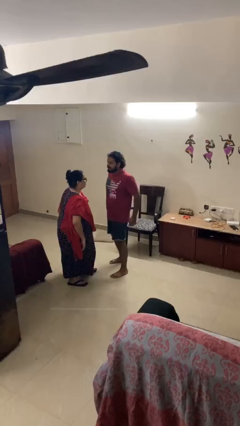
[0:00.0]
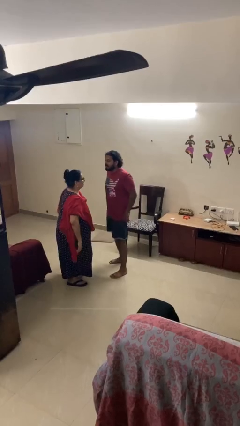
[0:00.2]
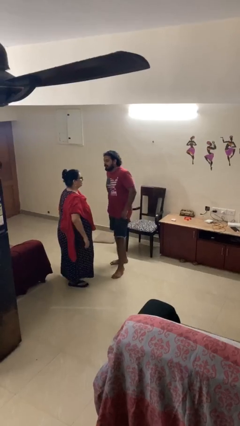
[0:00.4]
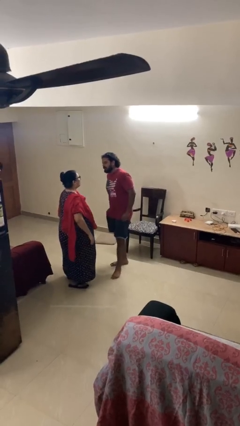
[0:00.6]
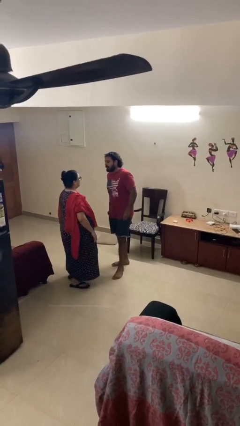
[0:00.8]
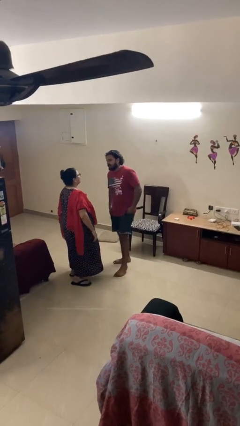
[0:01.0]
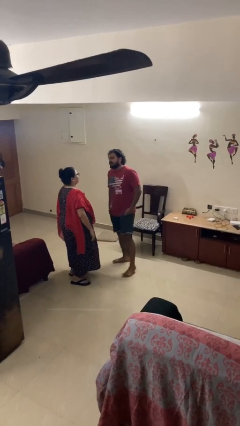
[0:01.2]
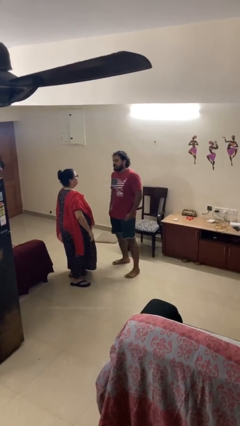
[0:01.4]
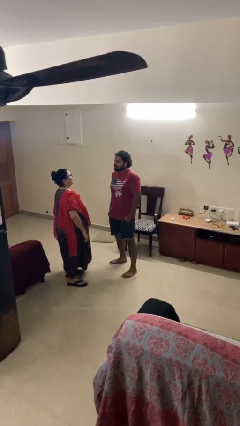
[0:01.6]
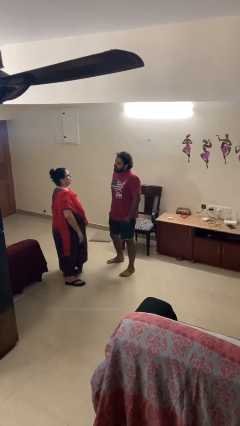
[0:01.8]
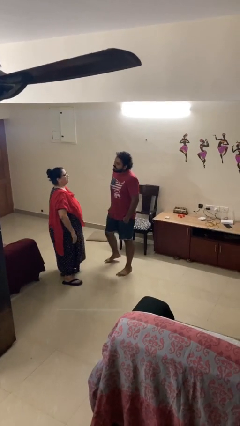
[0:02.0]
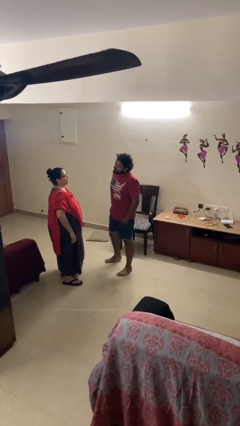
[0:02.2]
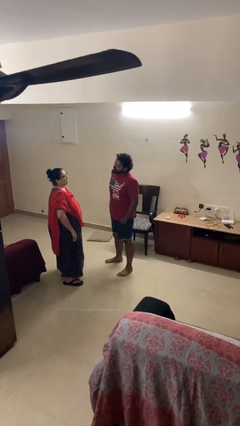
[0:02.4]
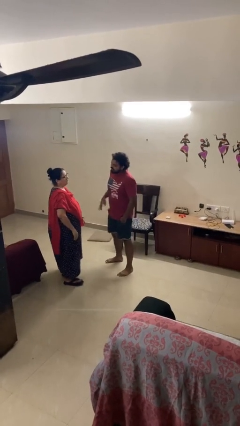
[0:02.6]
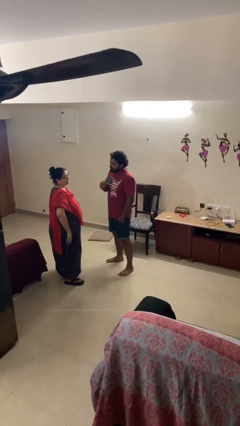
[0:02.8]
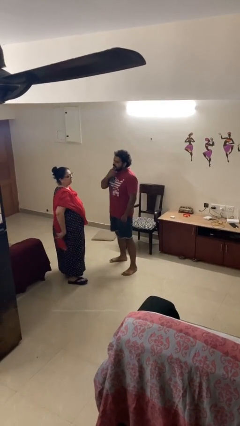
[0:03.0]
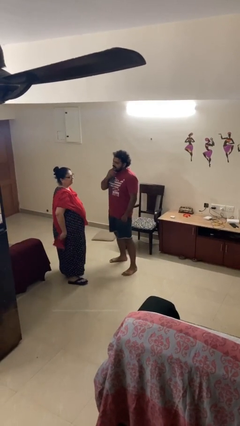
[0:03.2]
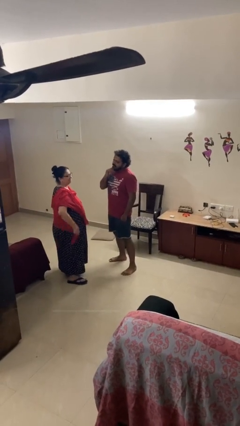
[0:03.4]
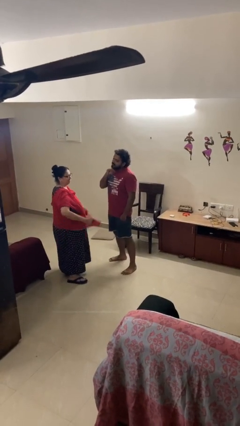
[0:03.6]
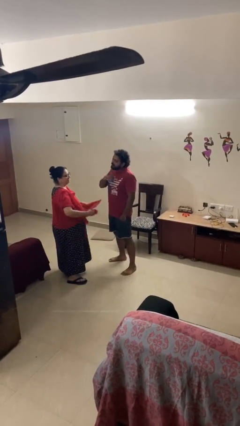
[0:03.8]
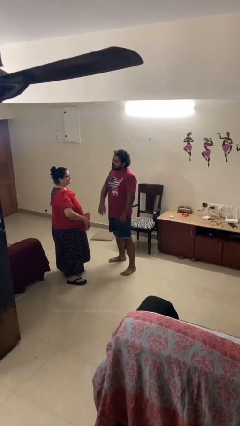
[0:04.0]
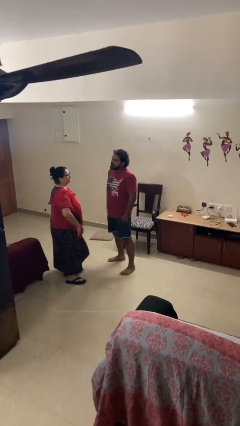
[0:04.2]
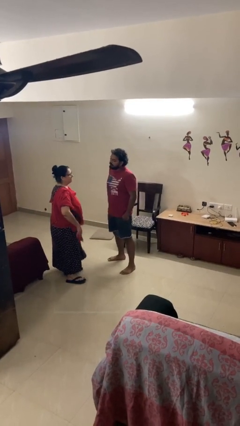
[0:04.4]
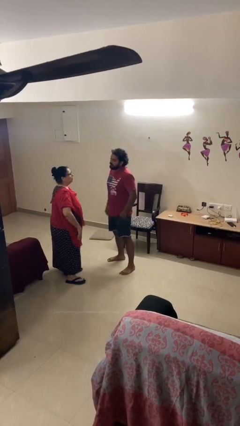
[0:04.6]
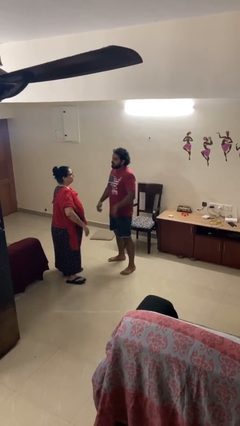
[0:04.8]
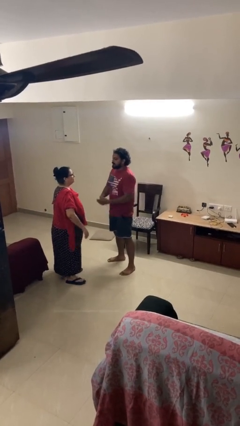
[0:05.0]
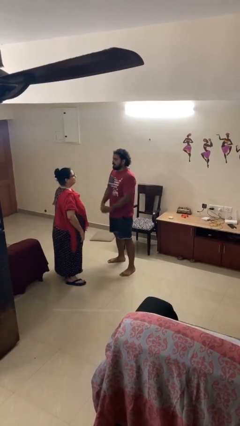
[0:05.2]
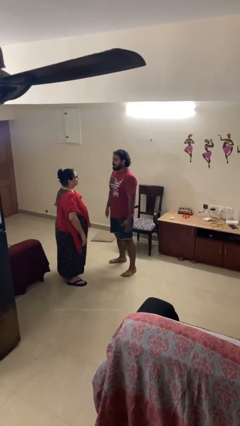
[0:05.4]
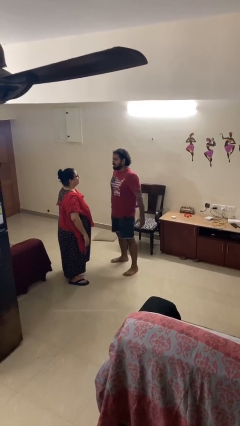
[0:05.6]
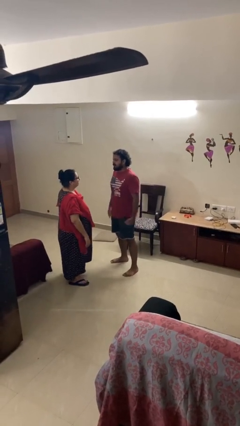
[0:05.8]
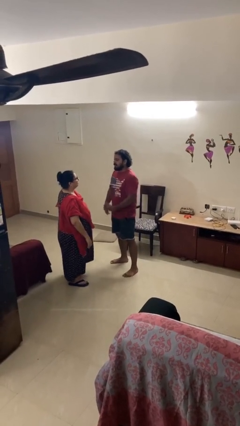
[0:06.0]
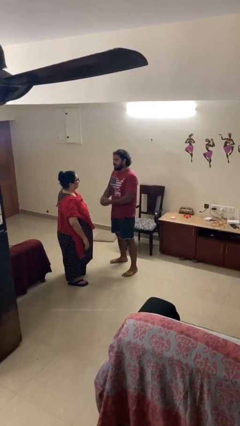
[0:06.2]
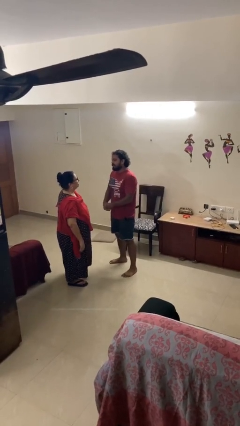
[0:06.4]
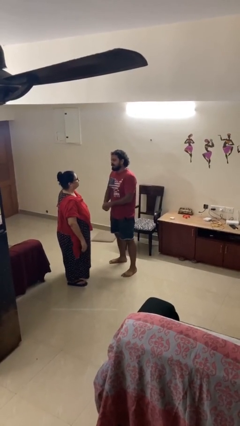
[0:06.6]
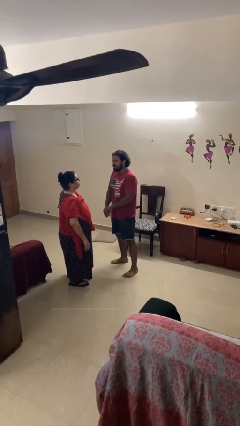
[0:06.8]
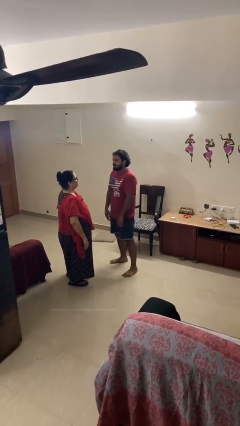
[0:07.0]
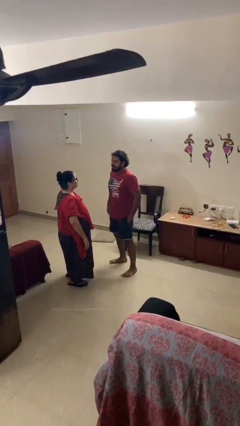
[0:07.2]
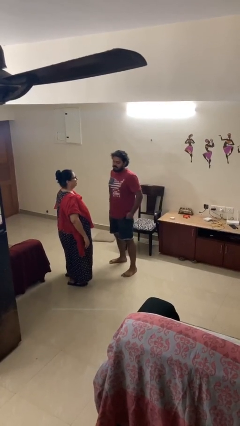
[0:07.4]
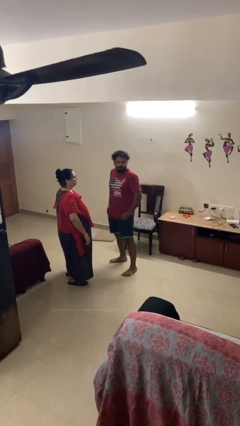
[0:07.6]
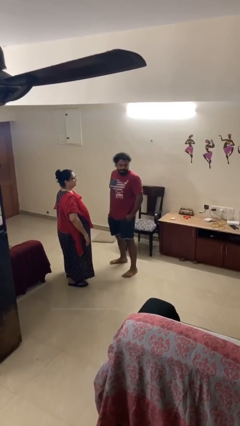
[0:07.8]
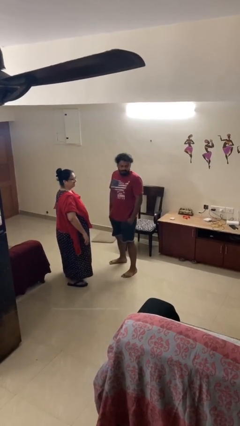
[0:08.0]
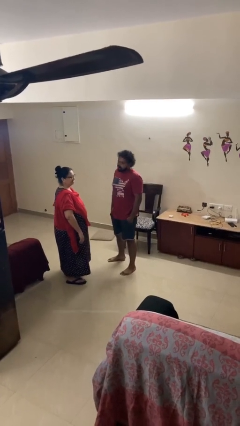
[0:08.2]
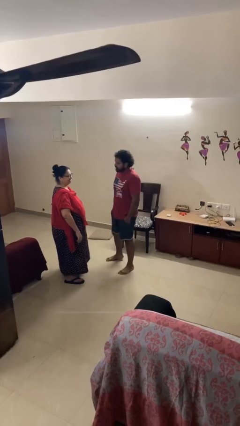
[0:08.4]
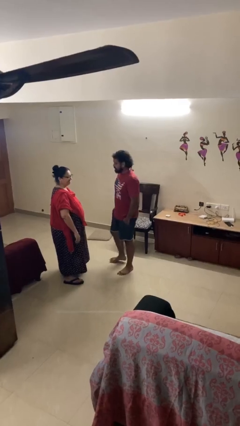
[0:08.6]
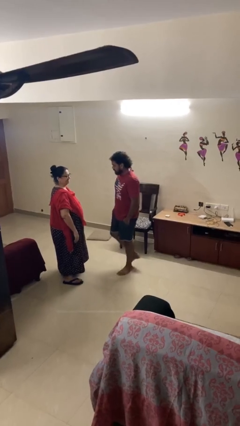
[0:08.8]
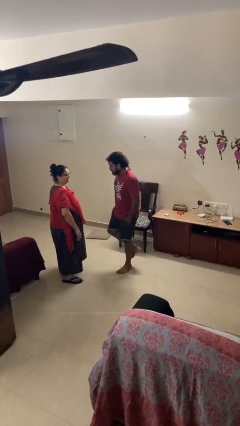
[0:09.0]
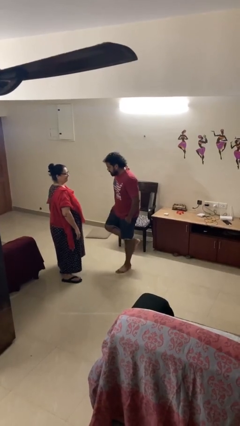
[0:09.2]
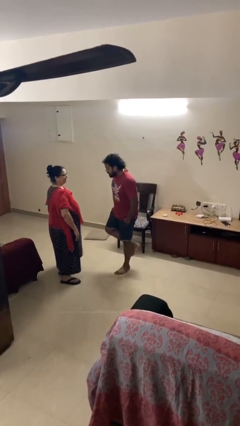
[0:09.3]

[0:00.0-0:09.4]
person talks to person

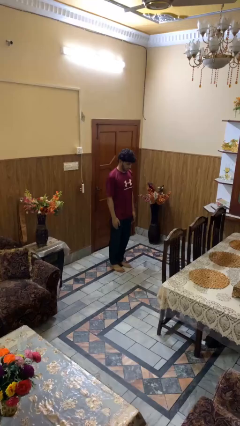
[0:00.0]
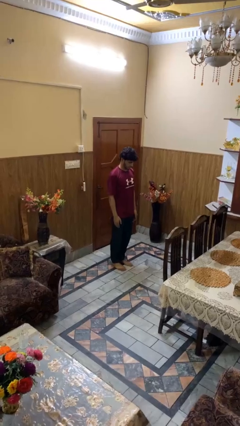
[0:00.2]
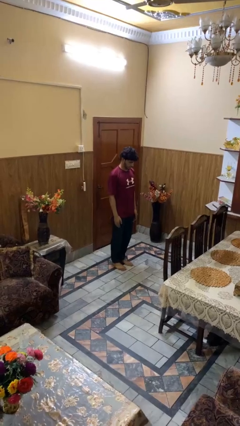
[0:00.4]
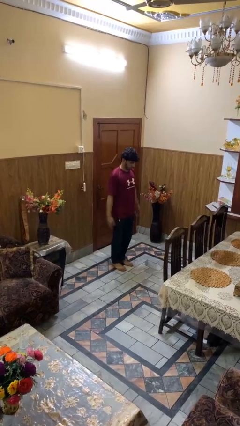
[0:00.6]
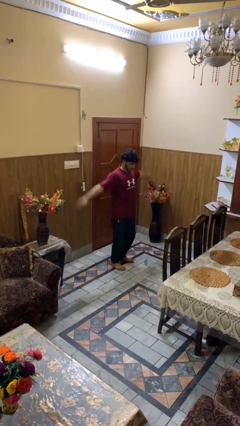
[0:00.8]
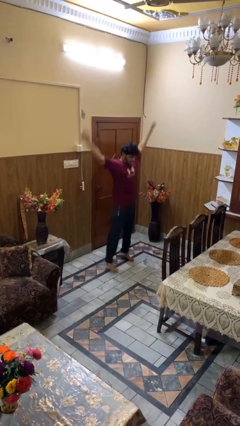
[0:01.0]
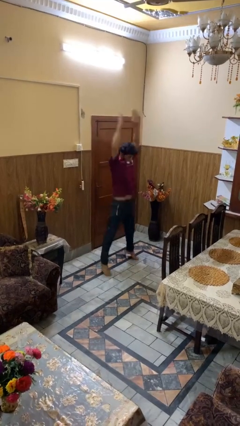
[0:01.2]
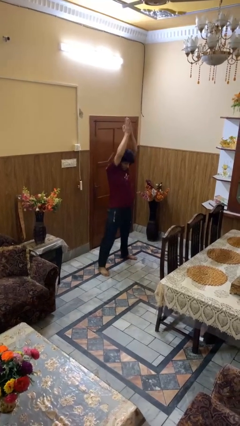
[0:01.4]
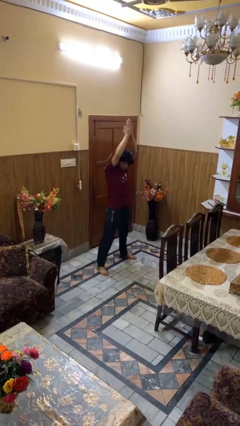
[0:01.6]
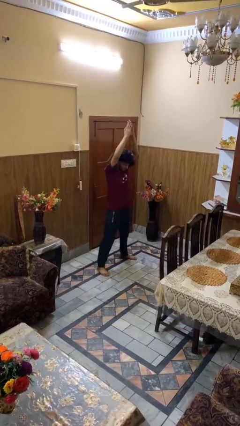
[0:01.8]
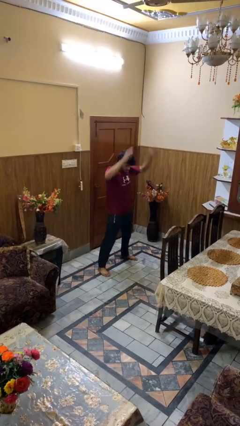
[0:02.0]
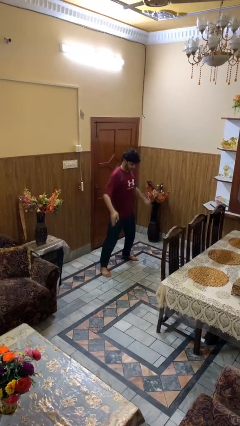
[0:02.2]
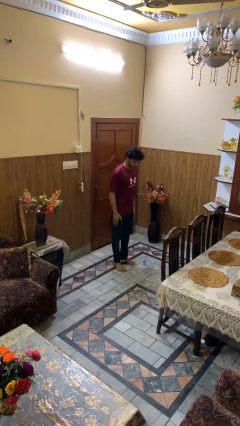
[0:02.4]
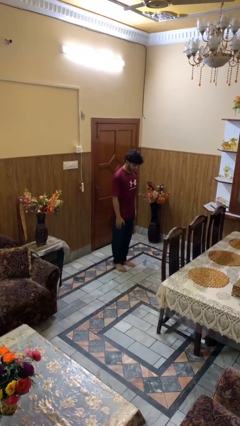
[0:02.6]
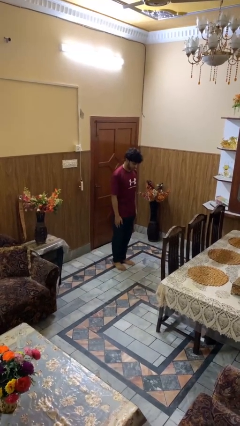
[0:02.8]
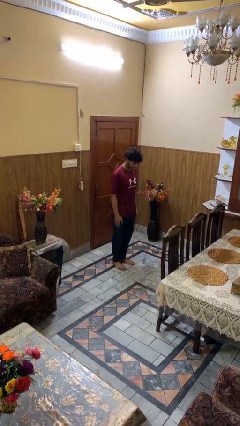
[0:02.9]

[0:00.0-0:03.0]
person exercises with jumping jacks

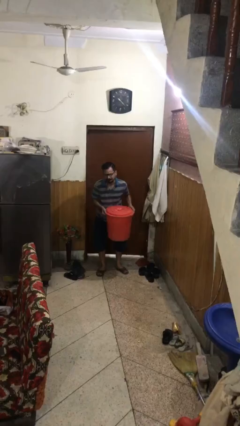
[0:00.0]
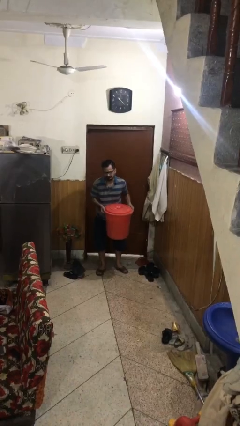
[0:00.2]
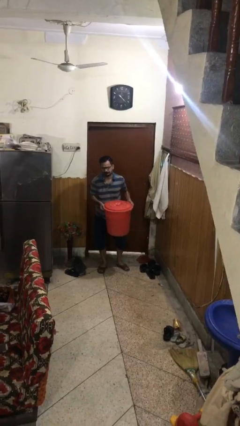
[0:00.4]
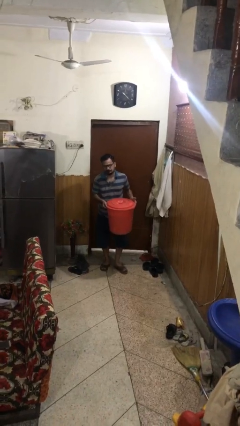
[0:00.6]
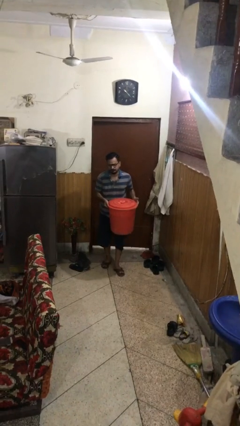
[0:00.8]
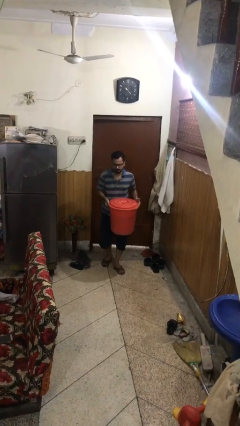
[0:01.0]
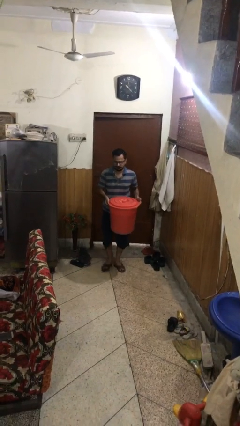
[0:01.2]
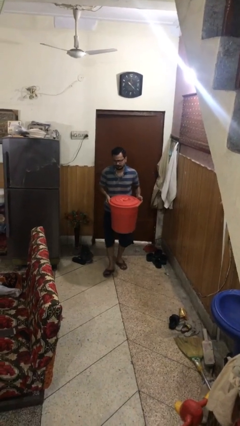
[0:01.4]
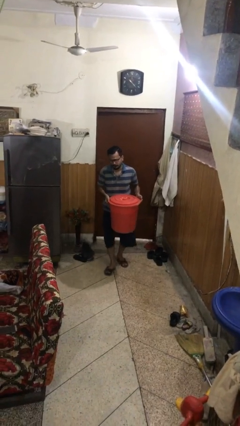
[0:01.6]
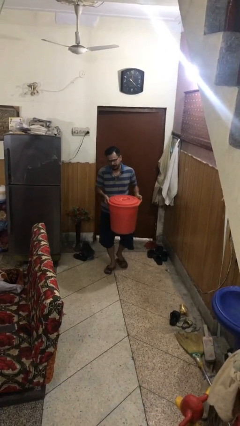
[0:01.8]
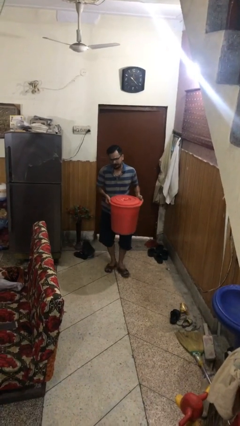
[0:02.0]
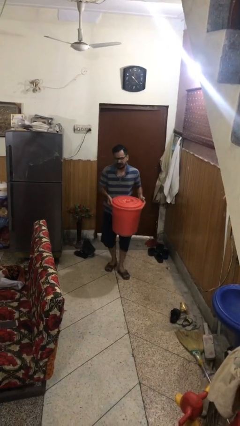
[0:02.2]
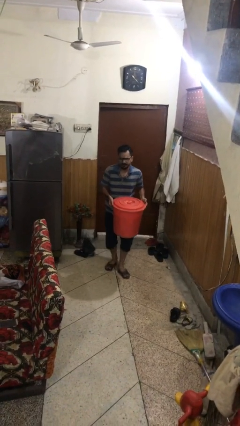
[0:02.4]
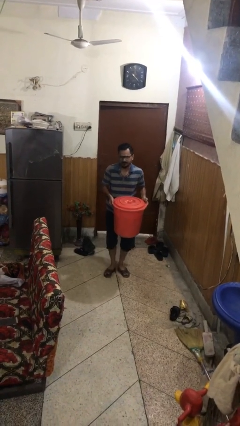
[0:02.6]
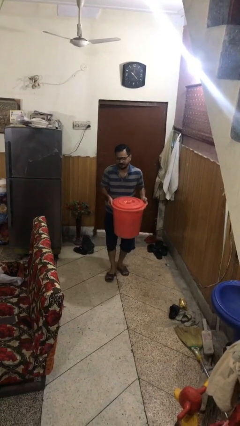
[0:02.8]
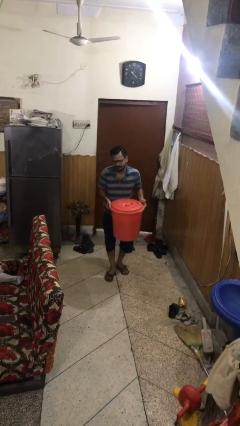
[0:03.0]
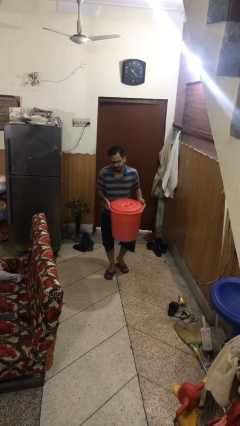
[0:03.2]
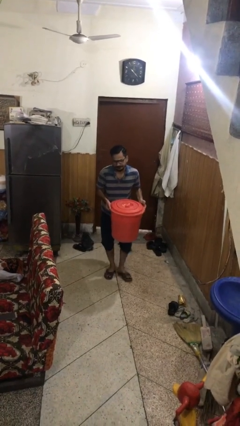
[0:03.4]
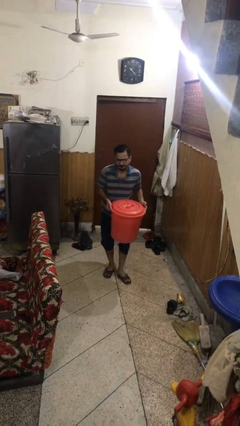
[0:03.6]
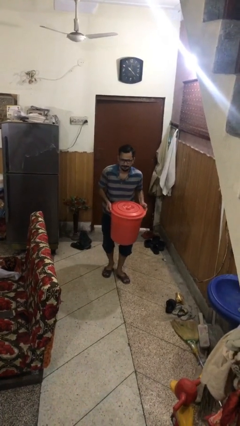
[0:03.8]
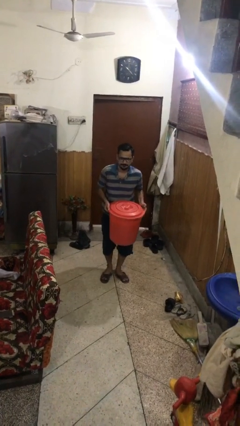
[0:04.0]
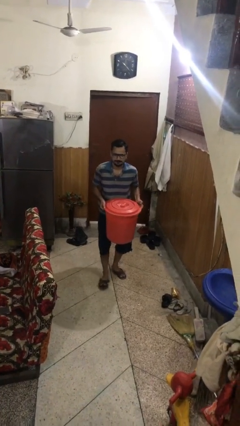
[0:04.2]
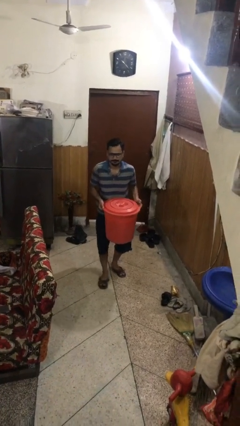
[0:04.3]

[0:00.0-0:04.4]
person carries heavy object

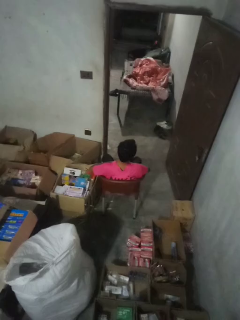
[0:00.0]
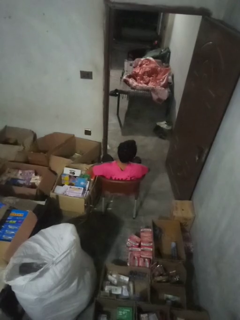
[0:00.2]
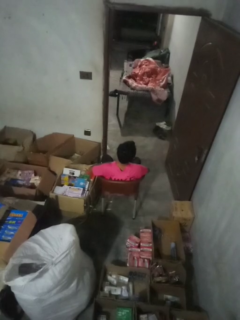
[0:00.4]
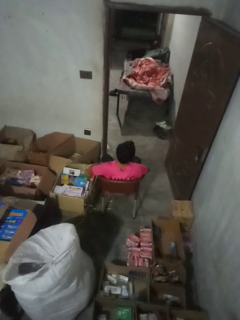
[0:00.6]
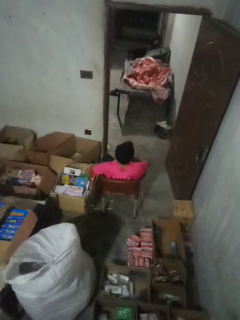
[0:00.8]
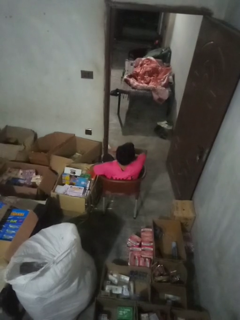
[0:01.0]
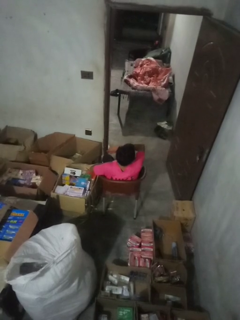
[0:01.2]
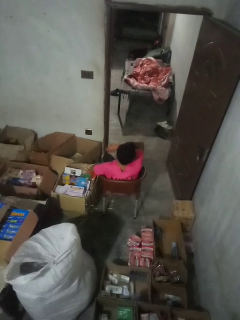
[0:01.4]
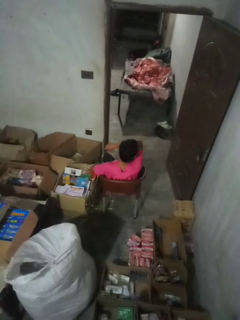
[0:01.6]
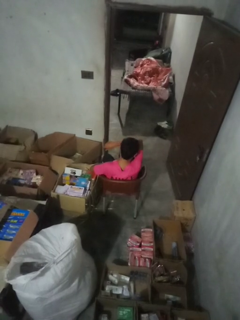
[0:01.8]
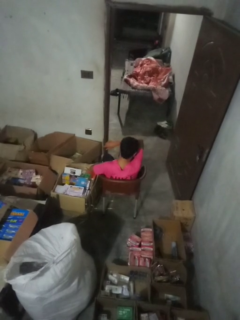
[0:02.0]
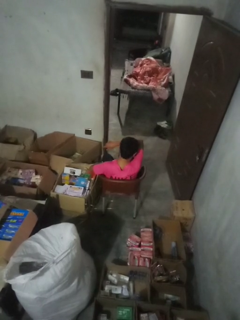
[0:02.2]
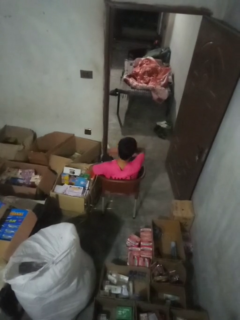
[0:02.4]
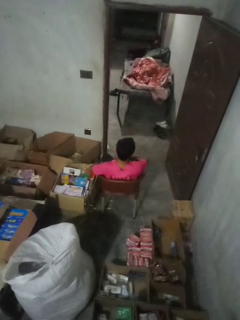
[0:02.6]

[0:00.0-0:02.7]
person sneezes into arm
